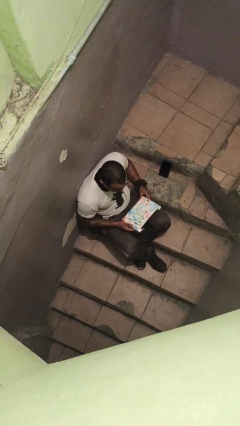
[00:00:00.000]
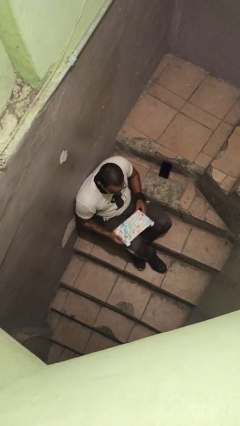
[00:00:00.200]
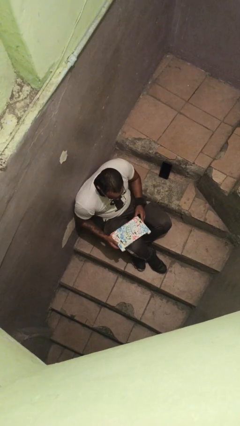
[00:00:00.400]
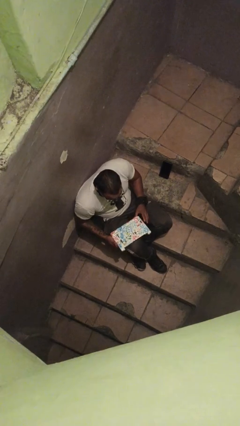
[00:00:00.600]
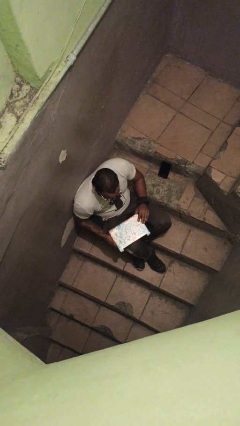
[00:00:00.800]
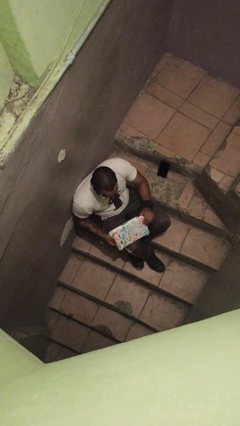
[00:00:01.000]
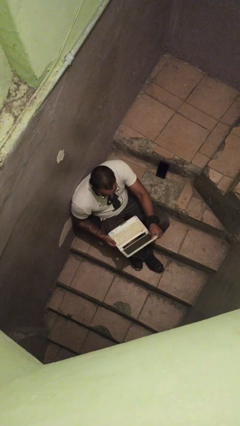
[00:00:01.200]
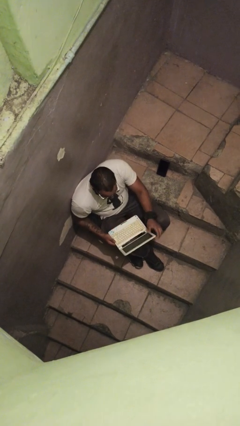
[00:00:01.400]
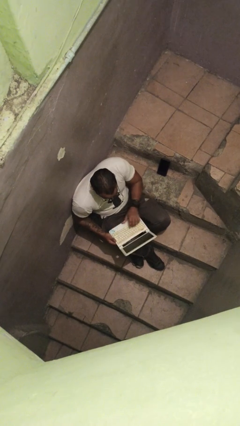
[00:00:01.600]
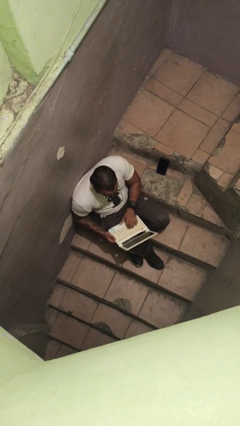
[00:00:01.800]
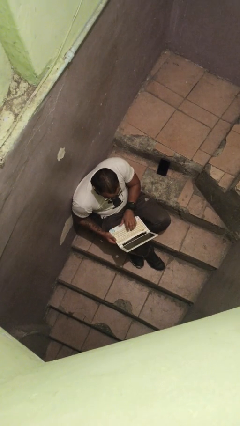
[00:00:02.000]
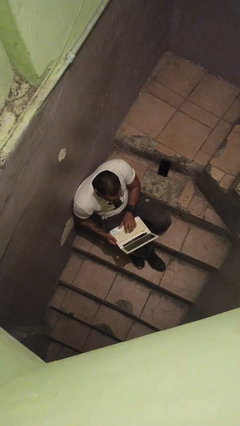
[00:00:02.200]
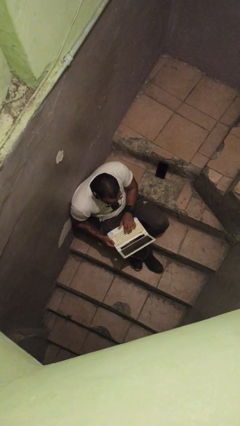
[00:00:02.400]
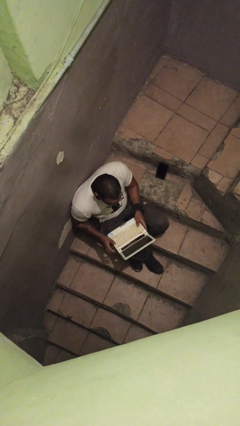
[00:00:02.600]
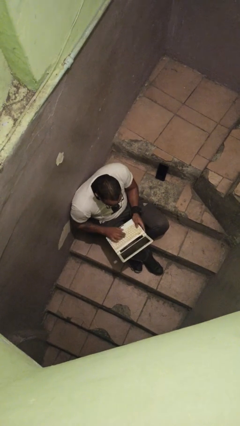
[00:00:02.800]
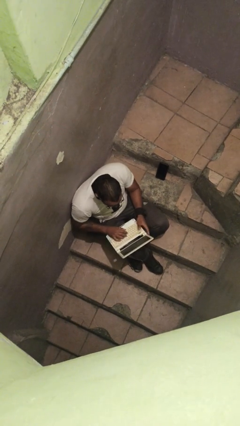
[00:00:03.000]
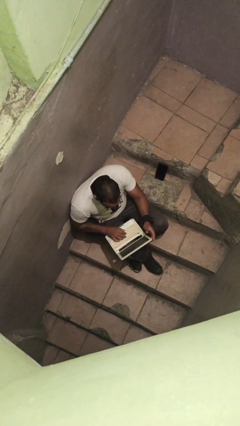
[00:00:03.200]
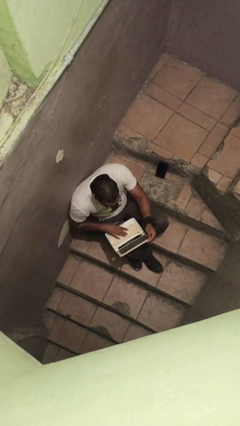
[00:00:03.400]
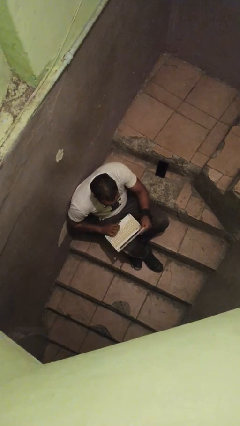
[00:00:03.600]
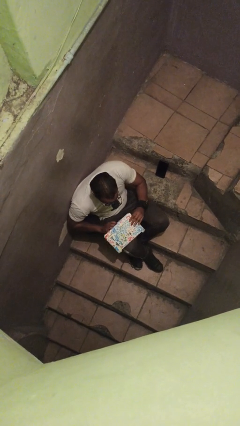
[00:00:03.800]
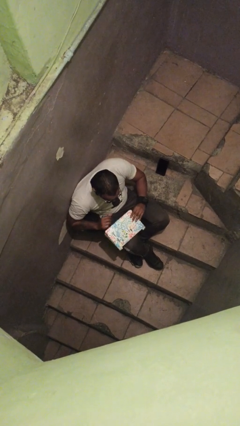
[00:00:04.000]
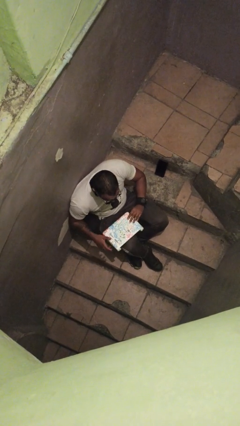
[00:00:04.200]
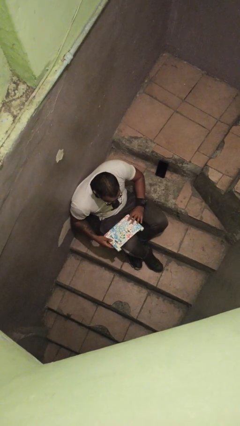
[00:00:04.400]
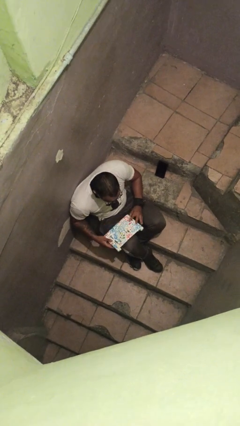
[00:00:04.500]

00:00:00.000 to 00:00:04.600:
person interacts with laptop

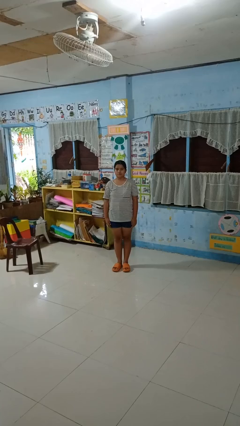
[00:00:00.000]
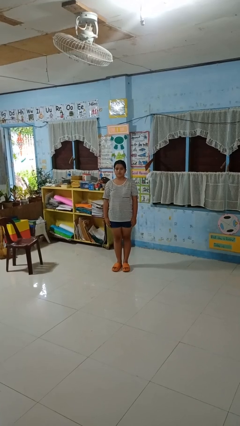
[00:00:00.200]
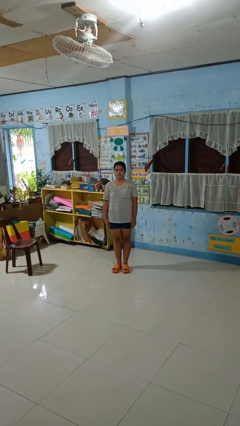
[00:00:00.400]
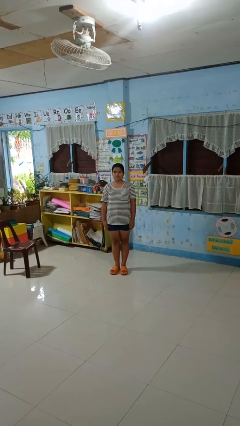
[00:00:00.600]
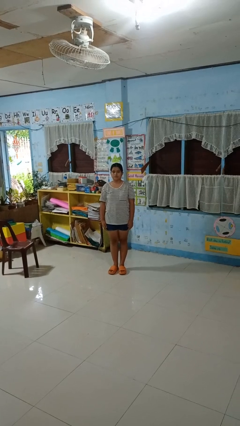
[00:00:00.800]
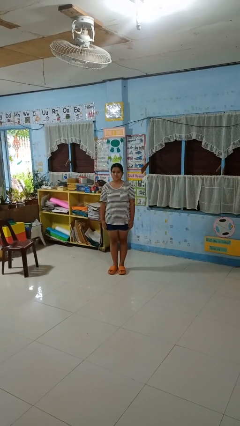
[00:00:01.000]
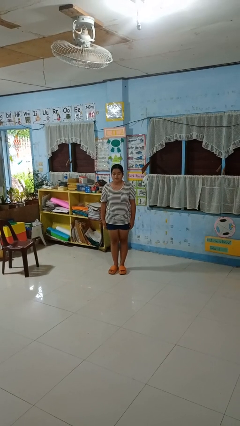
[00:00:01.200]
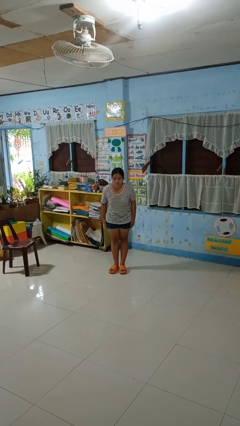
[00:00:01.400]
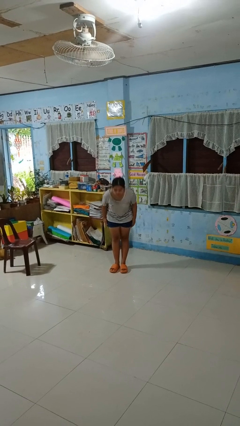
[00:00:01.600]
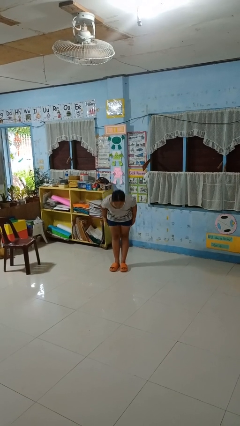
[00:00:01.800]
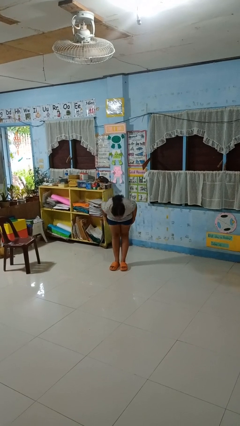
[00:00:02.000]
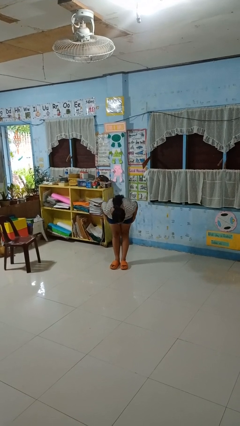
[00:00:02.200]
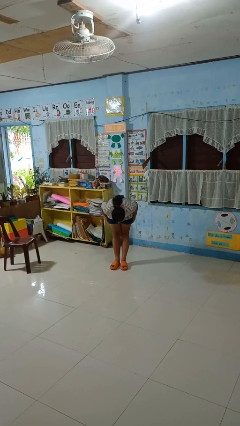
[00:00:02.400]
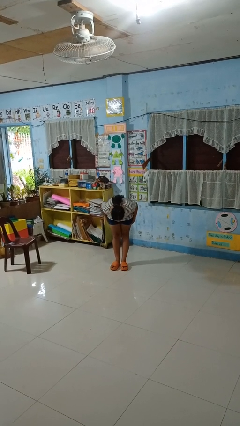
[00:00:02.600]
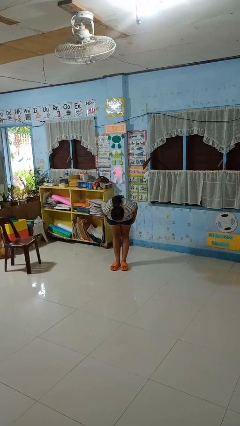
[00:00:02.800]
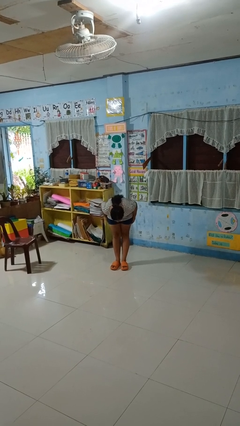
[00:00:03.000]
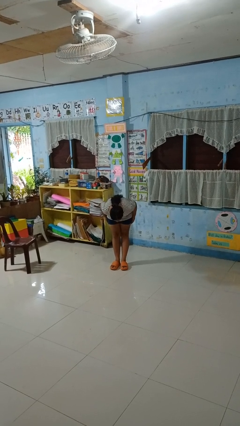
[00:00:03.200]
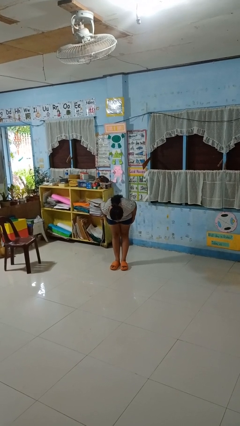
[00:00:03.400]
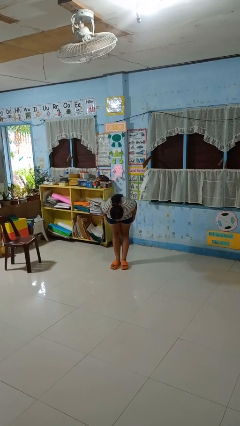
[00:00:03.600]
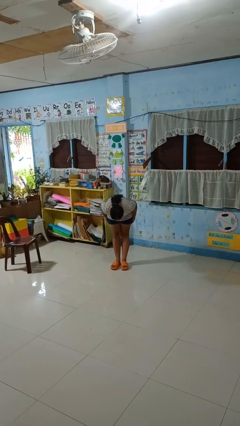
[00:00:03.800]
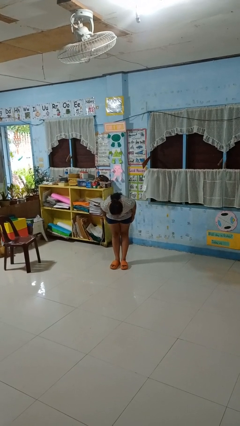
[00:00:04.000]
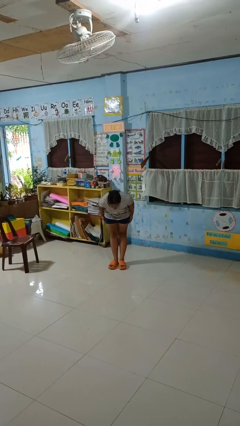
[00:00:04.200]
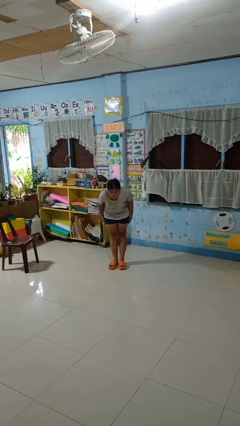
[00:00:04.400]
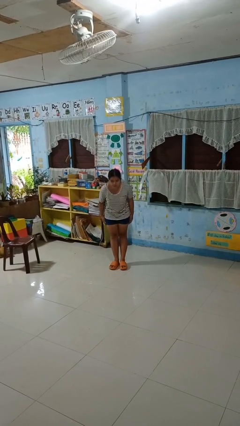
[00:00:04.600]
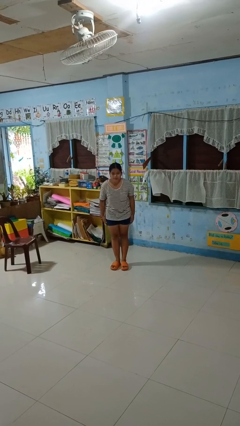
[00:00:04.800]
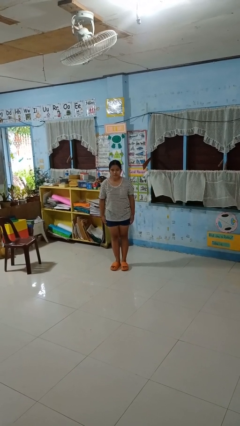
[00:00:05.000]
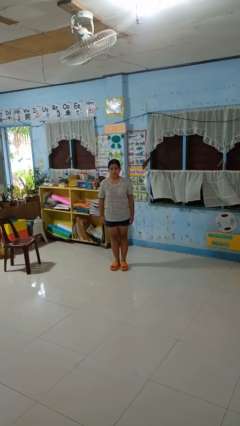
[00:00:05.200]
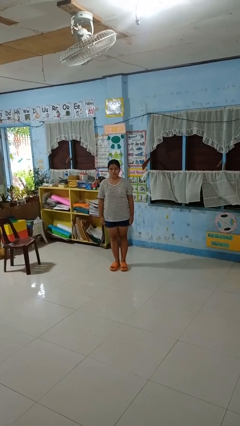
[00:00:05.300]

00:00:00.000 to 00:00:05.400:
person bows

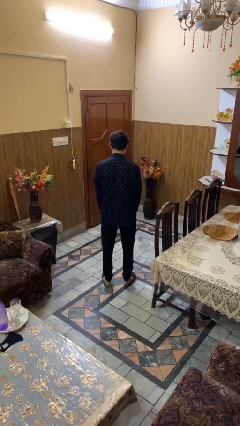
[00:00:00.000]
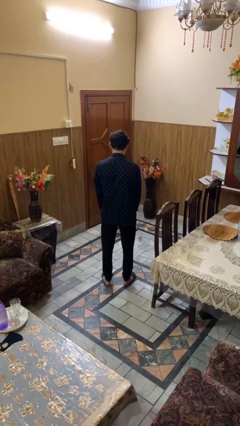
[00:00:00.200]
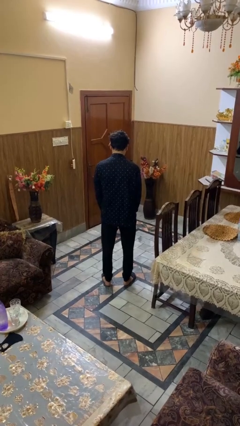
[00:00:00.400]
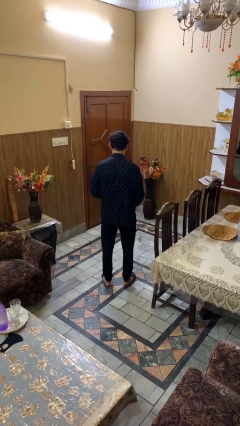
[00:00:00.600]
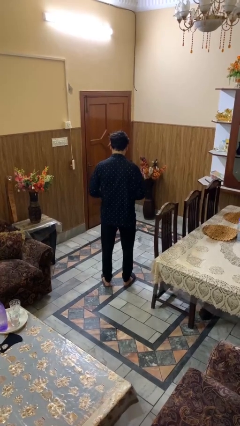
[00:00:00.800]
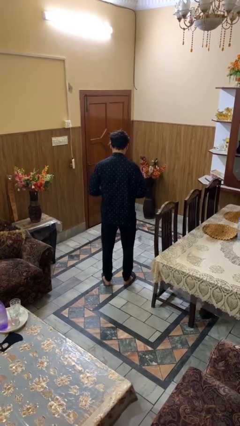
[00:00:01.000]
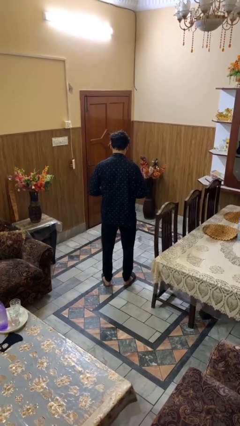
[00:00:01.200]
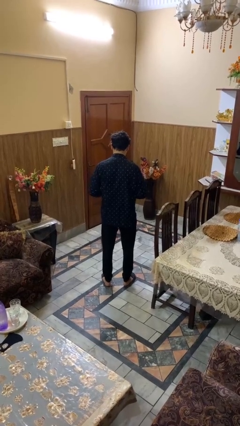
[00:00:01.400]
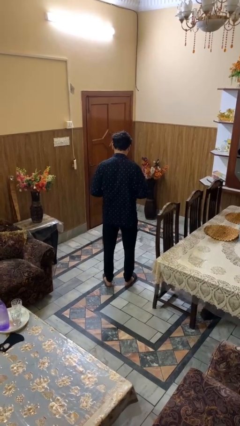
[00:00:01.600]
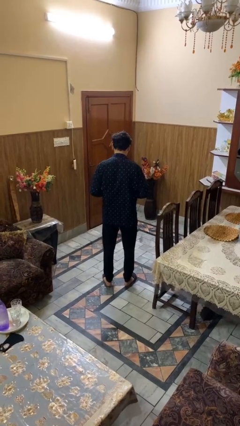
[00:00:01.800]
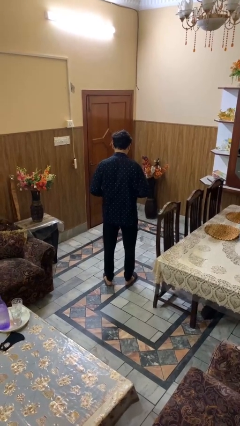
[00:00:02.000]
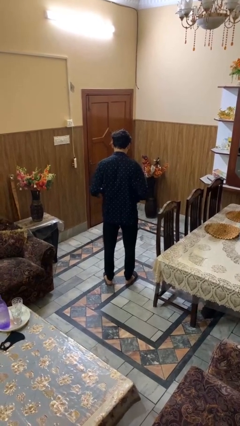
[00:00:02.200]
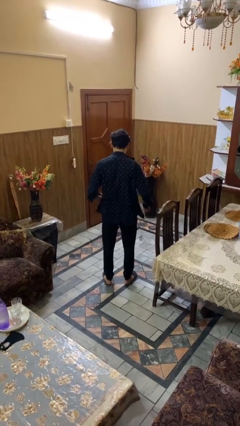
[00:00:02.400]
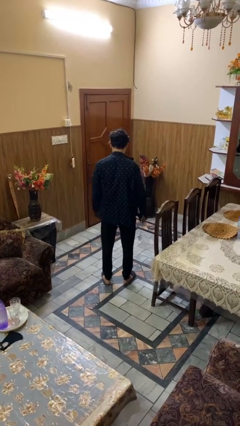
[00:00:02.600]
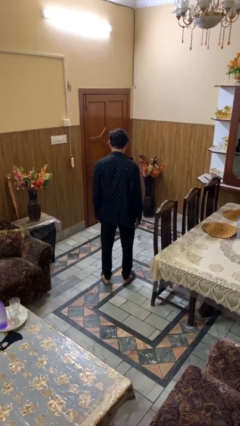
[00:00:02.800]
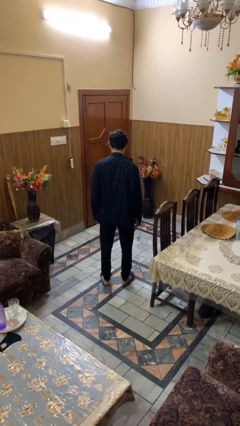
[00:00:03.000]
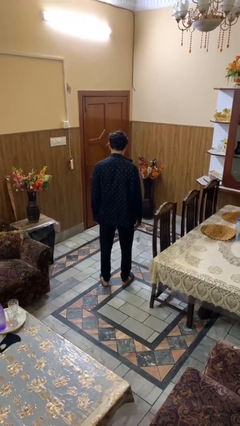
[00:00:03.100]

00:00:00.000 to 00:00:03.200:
person unbuttons shirt

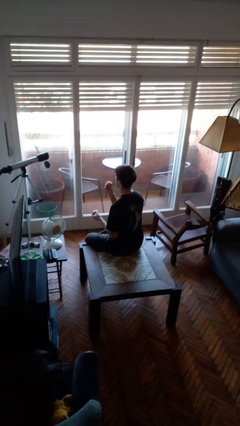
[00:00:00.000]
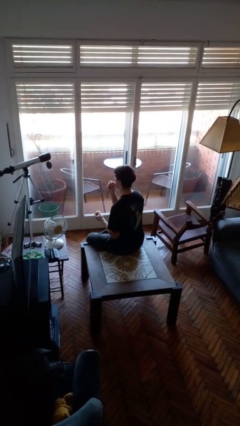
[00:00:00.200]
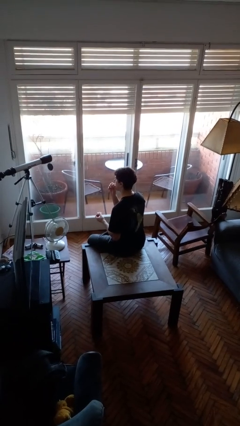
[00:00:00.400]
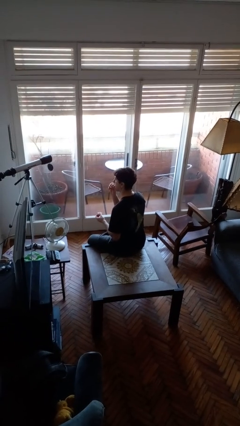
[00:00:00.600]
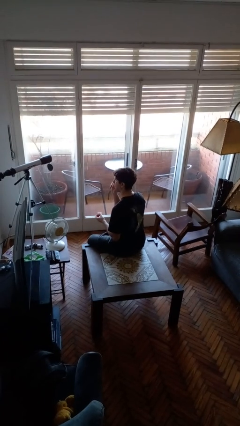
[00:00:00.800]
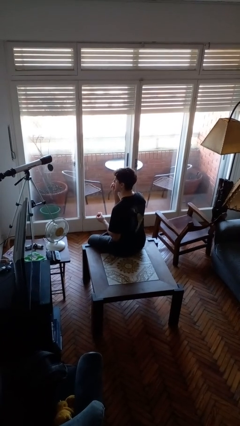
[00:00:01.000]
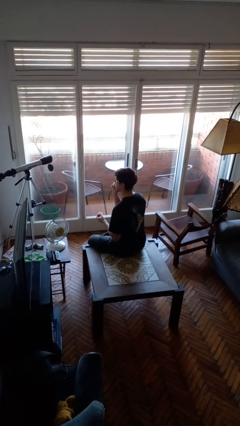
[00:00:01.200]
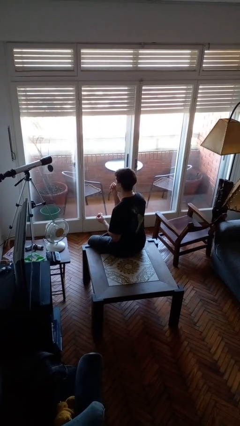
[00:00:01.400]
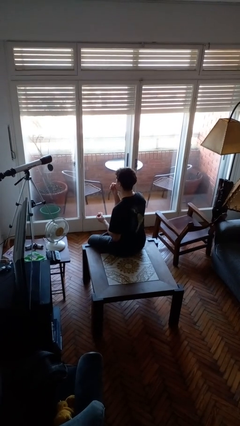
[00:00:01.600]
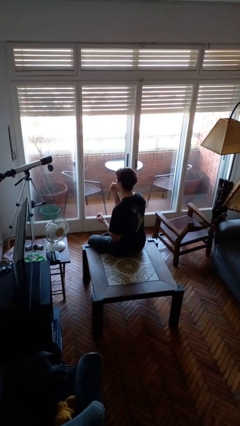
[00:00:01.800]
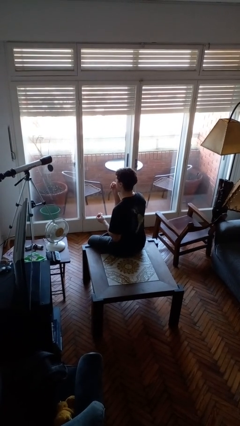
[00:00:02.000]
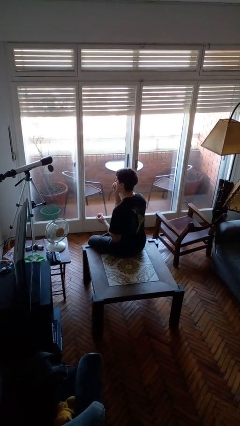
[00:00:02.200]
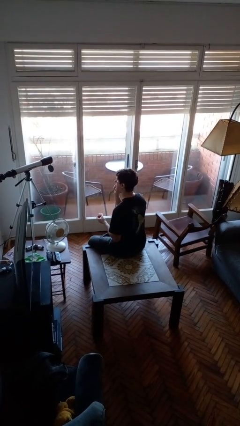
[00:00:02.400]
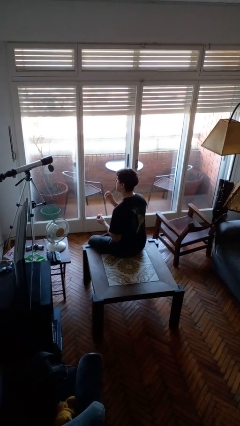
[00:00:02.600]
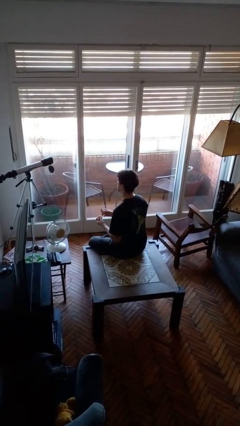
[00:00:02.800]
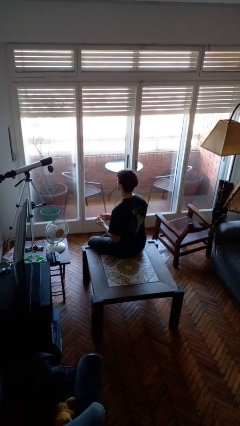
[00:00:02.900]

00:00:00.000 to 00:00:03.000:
person applies lip makeup

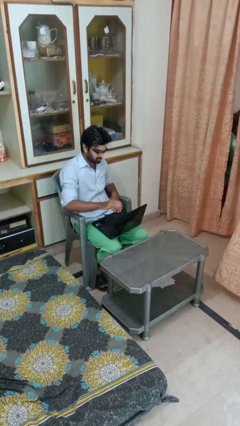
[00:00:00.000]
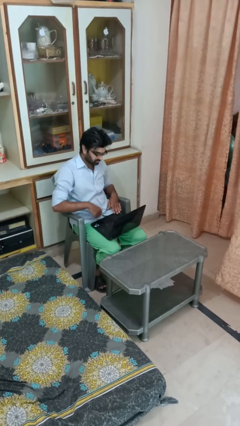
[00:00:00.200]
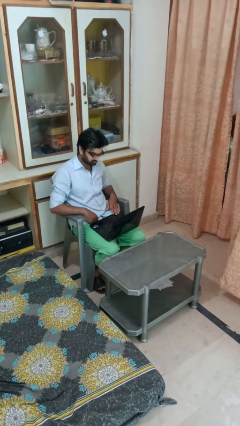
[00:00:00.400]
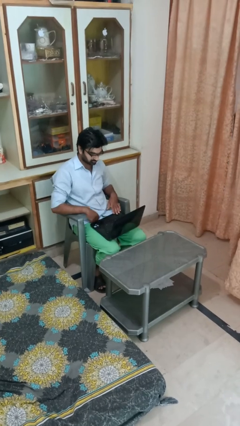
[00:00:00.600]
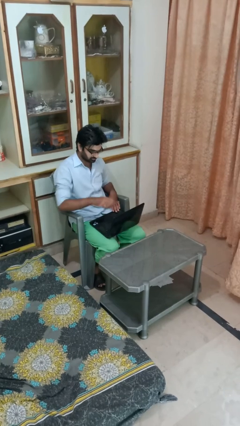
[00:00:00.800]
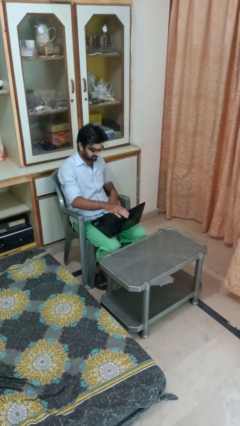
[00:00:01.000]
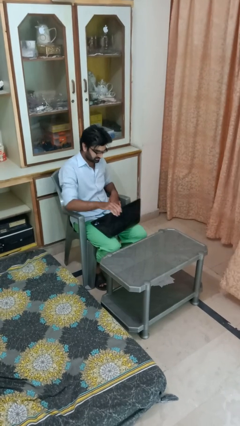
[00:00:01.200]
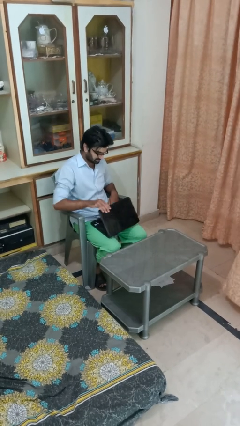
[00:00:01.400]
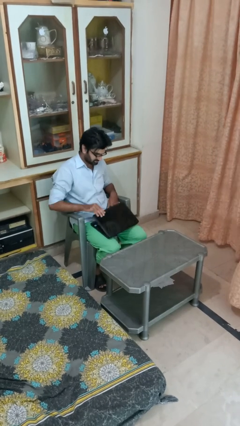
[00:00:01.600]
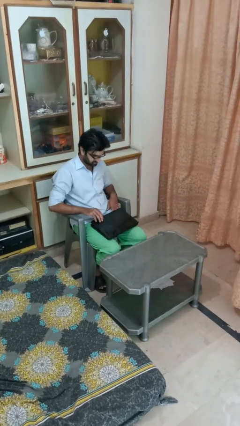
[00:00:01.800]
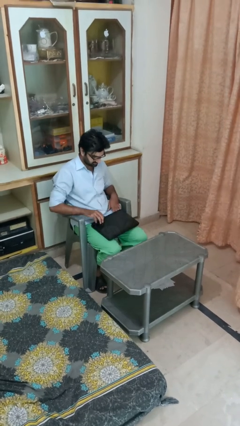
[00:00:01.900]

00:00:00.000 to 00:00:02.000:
person closes laptop
